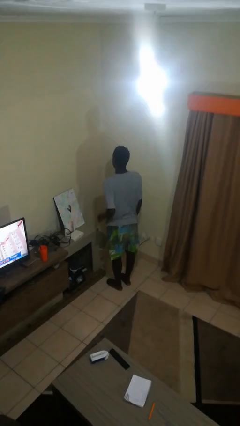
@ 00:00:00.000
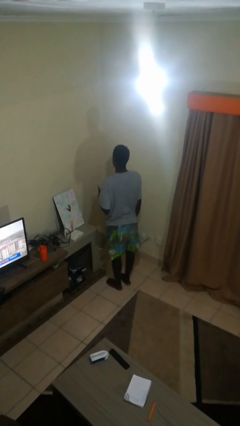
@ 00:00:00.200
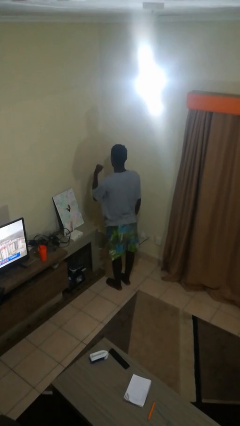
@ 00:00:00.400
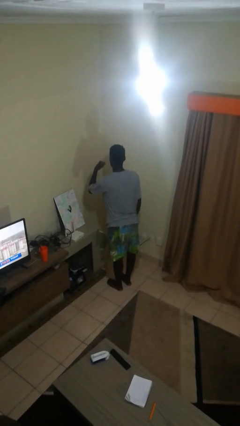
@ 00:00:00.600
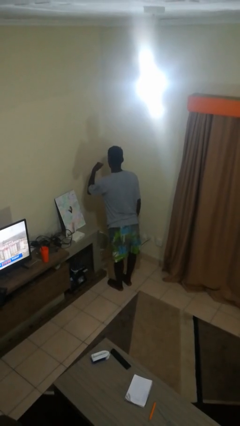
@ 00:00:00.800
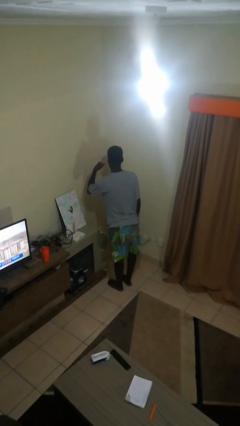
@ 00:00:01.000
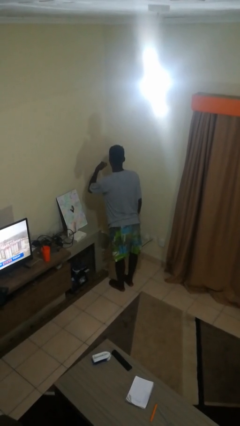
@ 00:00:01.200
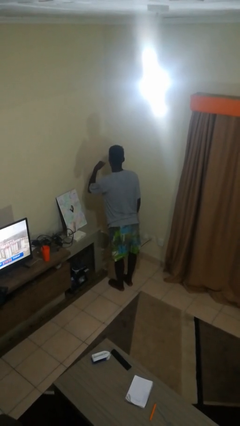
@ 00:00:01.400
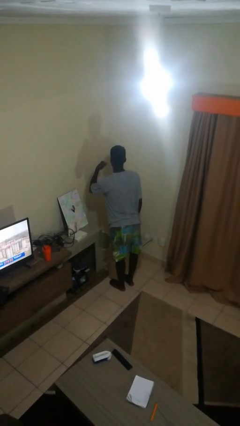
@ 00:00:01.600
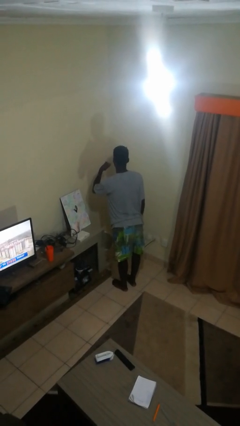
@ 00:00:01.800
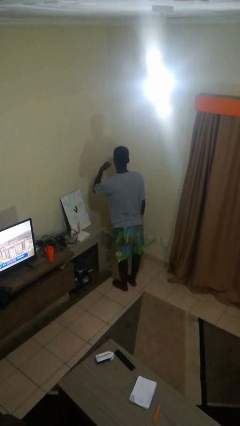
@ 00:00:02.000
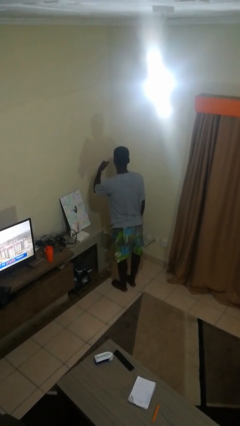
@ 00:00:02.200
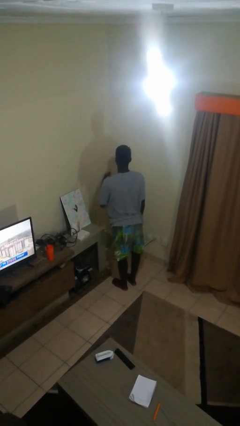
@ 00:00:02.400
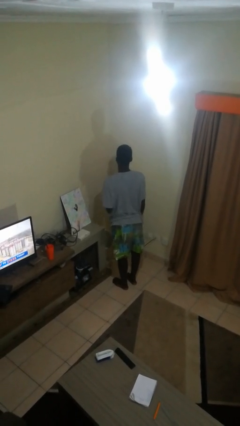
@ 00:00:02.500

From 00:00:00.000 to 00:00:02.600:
person gestures call me

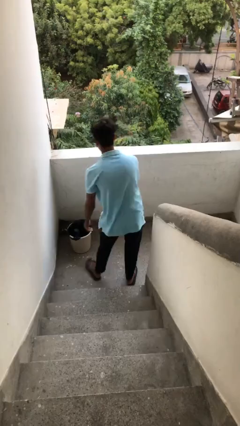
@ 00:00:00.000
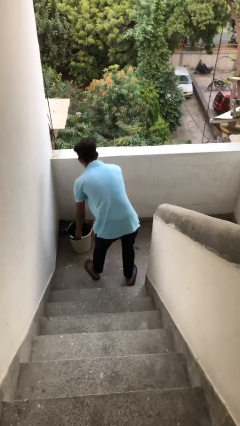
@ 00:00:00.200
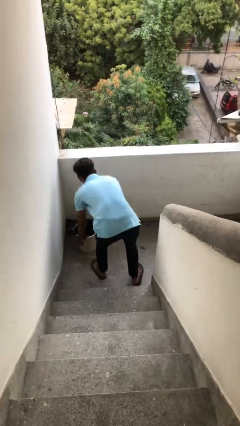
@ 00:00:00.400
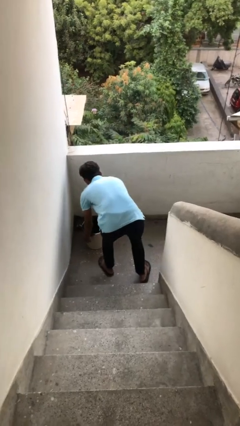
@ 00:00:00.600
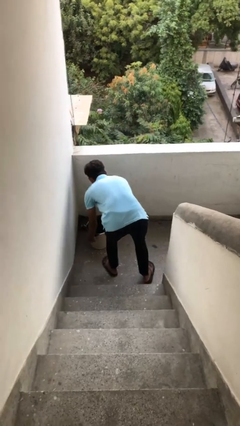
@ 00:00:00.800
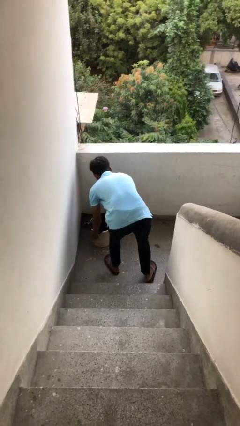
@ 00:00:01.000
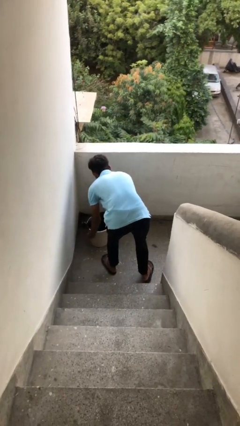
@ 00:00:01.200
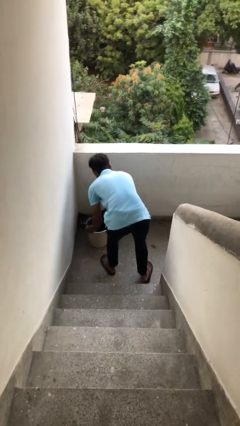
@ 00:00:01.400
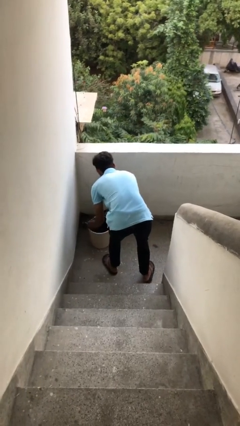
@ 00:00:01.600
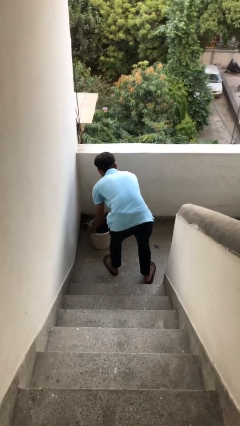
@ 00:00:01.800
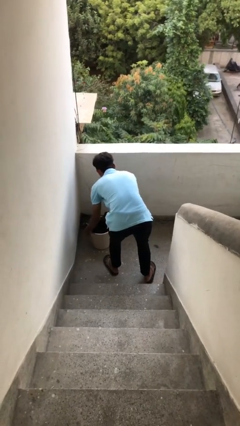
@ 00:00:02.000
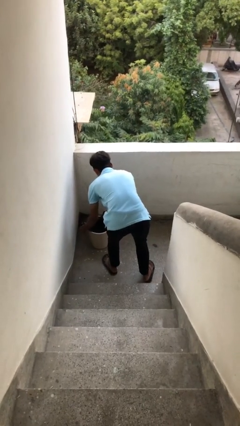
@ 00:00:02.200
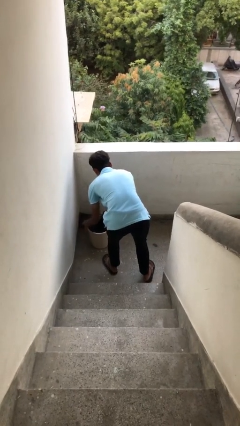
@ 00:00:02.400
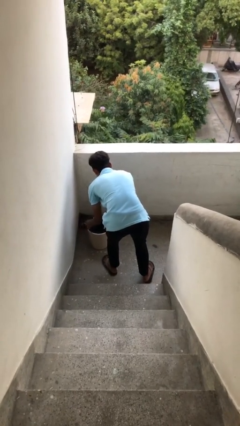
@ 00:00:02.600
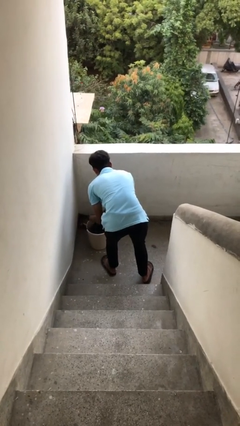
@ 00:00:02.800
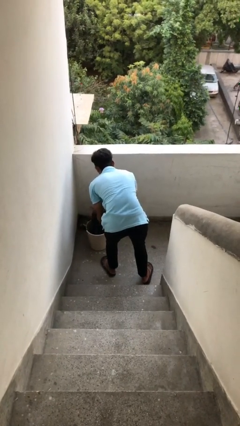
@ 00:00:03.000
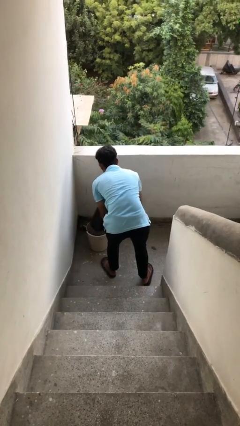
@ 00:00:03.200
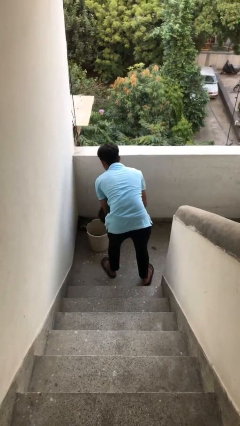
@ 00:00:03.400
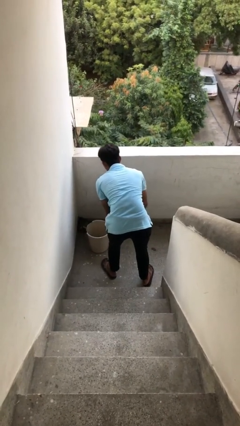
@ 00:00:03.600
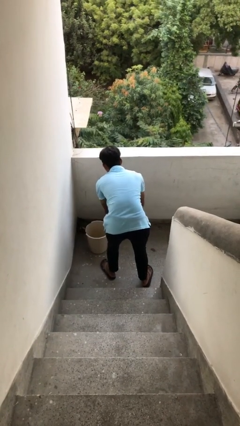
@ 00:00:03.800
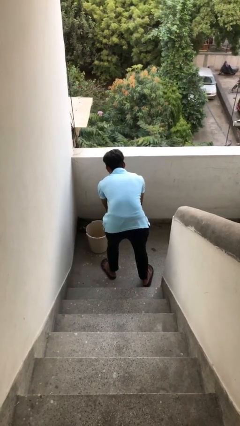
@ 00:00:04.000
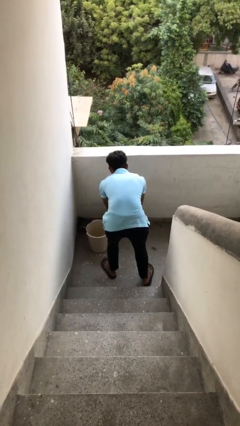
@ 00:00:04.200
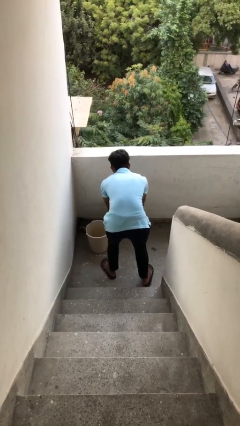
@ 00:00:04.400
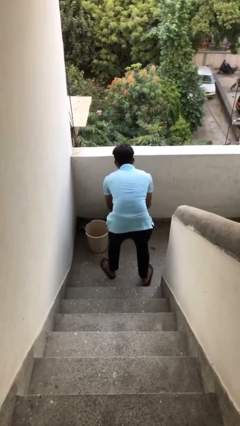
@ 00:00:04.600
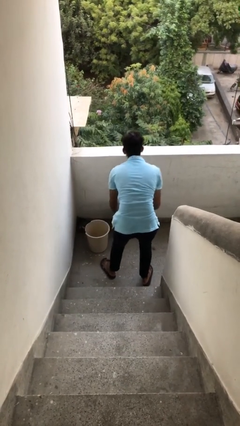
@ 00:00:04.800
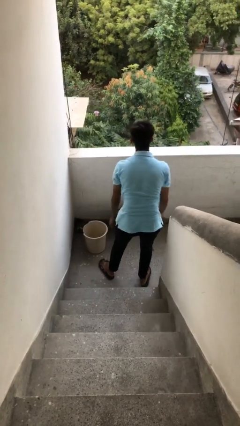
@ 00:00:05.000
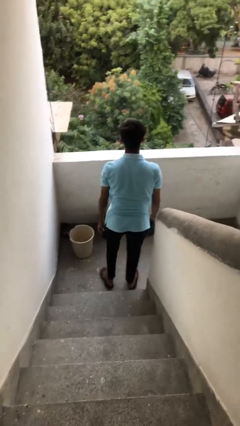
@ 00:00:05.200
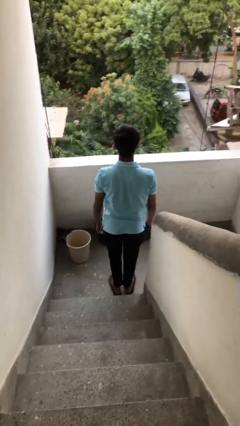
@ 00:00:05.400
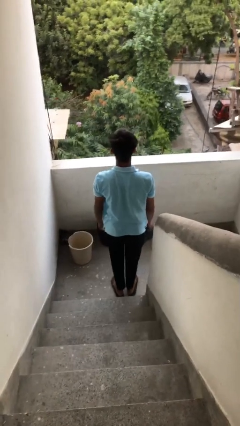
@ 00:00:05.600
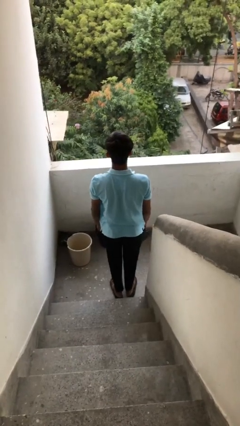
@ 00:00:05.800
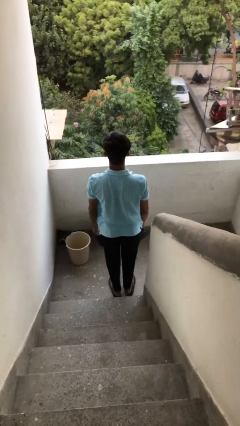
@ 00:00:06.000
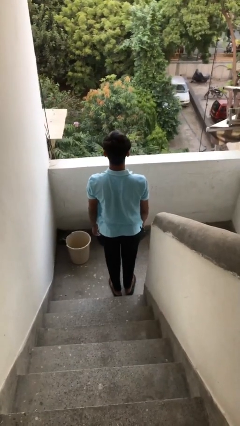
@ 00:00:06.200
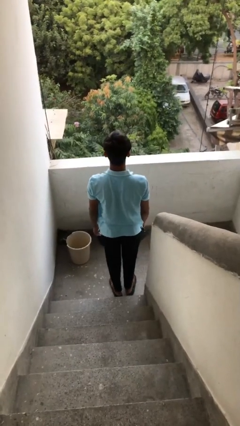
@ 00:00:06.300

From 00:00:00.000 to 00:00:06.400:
person removes trashbag from trashcan

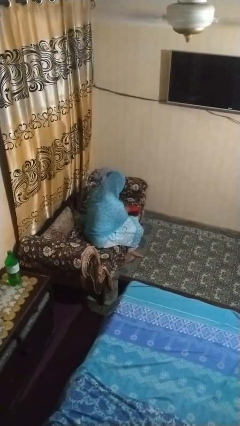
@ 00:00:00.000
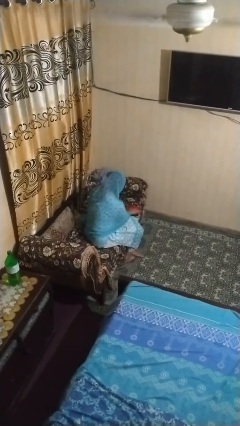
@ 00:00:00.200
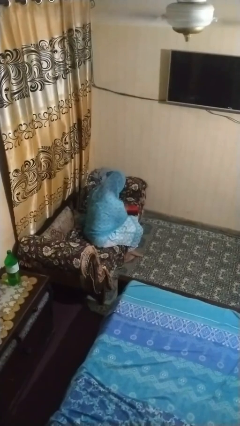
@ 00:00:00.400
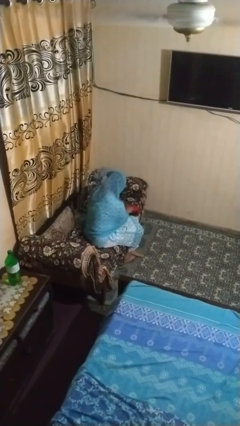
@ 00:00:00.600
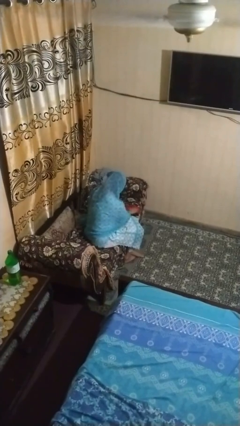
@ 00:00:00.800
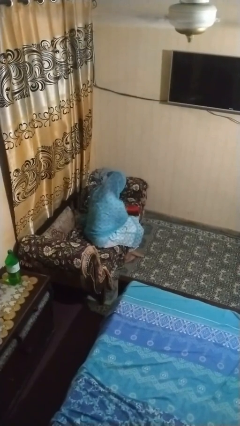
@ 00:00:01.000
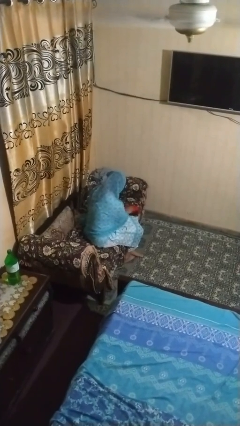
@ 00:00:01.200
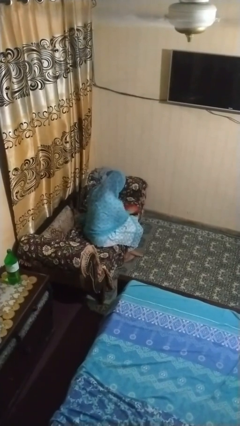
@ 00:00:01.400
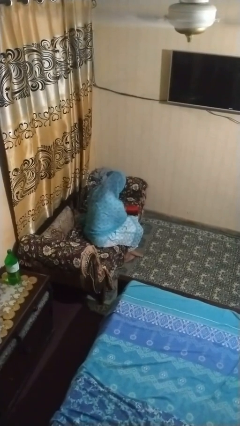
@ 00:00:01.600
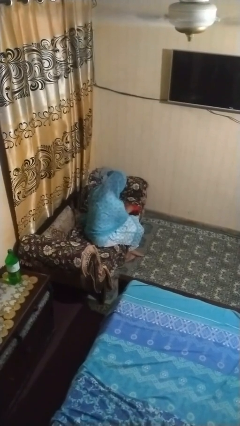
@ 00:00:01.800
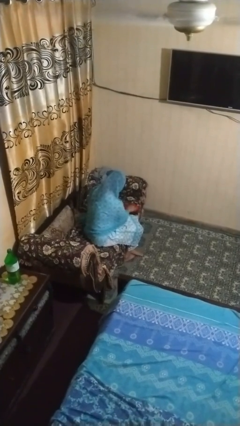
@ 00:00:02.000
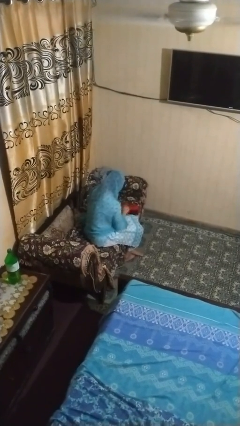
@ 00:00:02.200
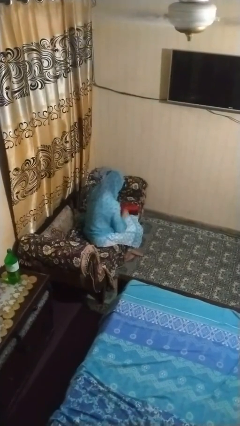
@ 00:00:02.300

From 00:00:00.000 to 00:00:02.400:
person waves hand over object

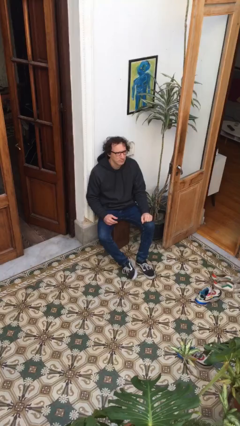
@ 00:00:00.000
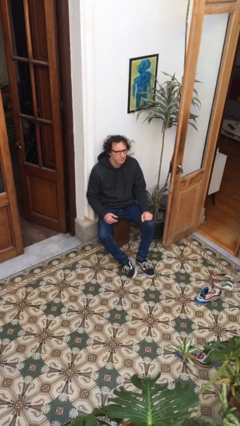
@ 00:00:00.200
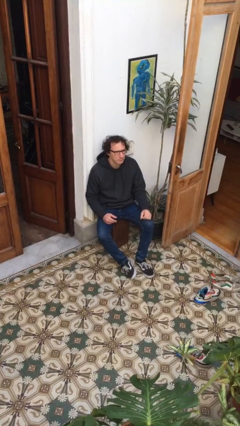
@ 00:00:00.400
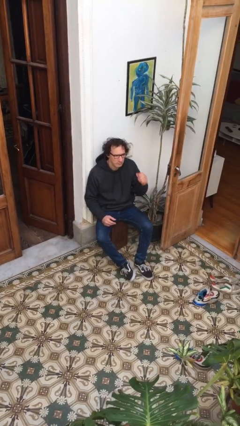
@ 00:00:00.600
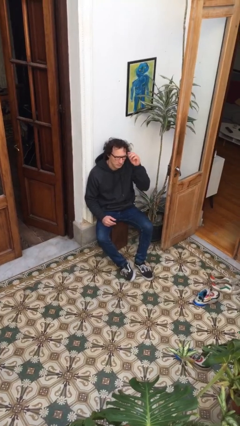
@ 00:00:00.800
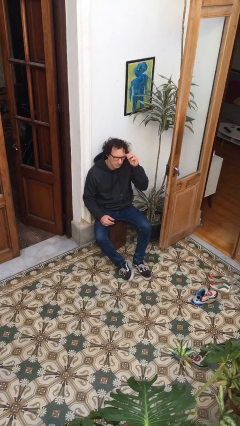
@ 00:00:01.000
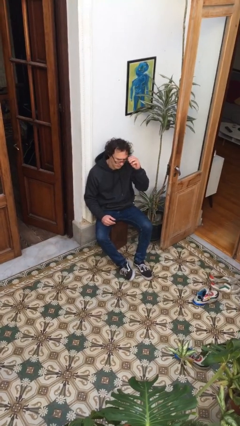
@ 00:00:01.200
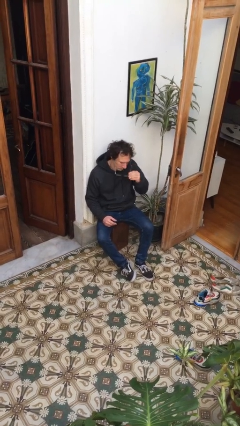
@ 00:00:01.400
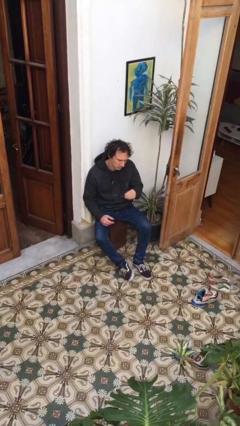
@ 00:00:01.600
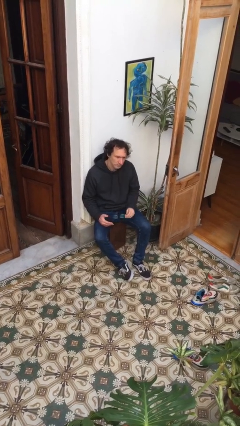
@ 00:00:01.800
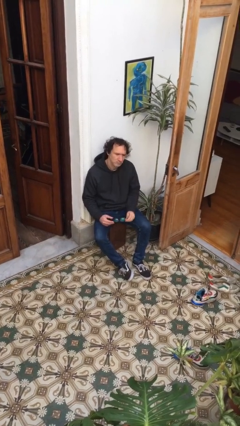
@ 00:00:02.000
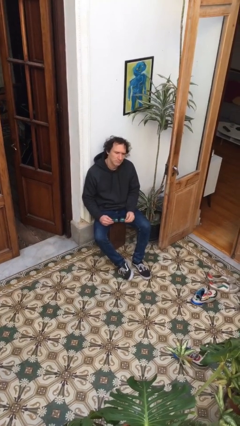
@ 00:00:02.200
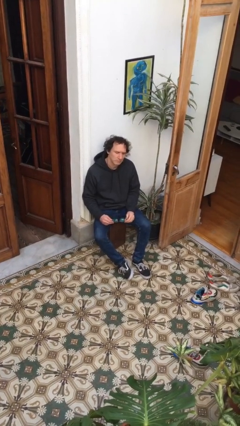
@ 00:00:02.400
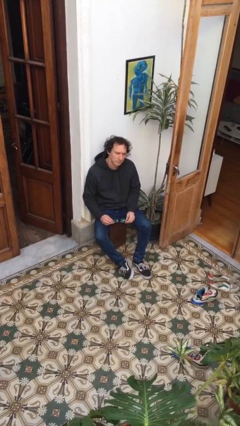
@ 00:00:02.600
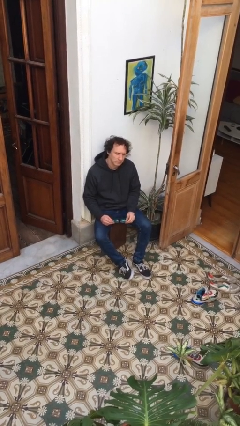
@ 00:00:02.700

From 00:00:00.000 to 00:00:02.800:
person takes off glasses

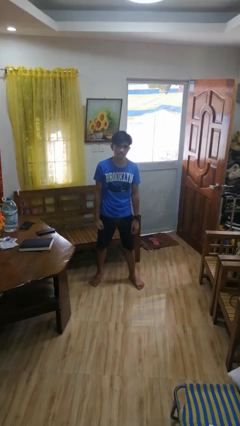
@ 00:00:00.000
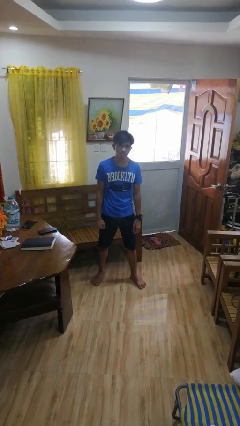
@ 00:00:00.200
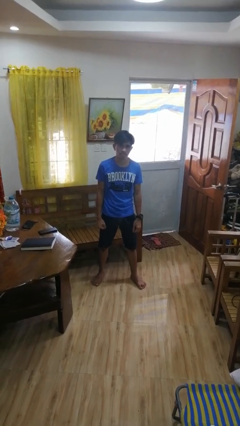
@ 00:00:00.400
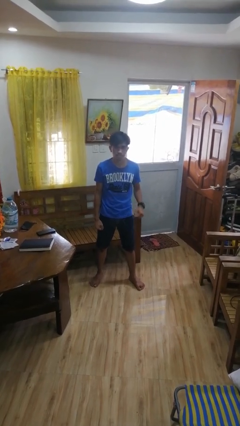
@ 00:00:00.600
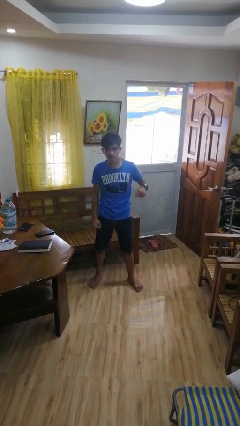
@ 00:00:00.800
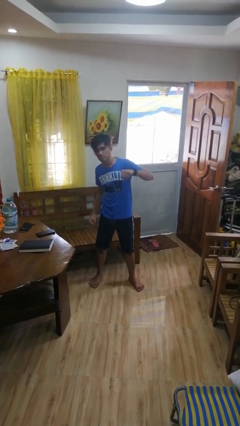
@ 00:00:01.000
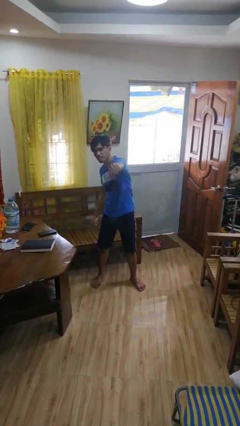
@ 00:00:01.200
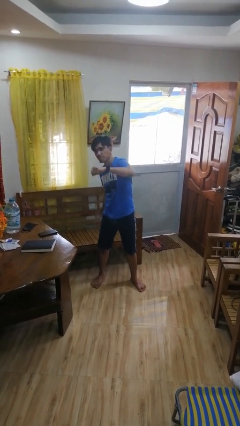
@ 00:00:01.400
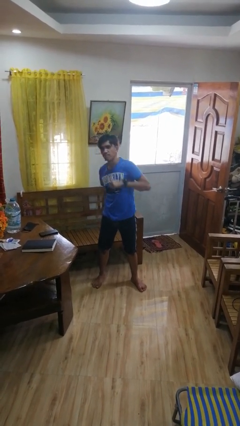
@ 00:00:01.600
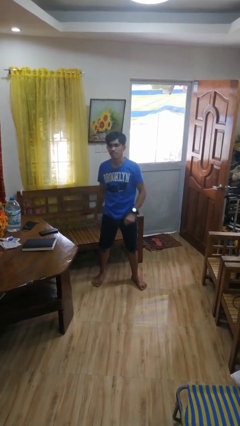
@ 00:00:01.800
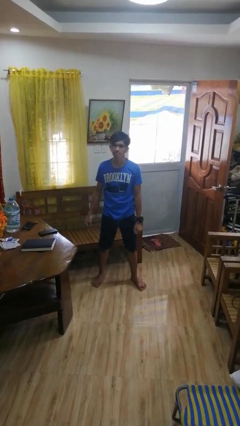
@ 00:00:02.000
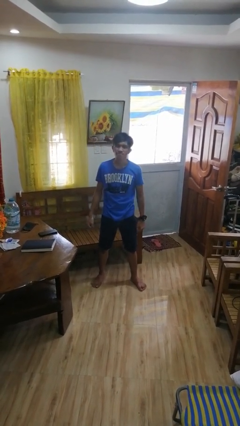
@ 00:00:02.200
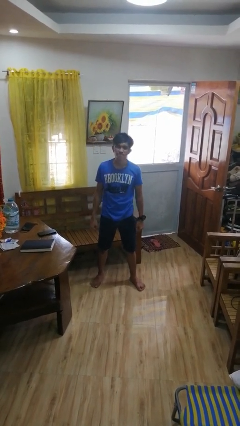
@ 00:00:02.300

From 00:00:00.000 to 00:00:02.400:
person punches

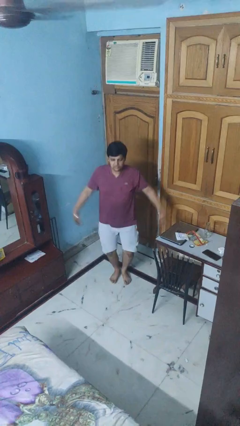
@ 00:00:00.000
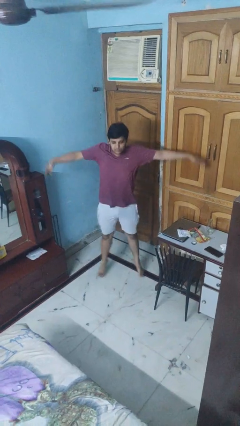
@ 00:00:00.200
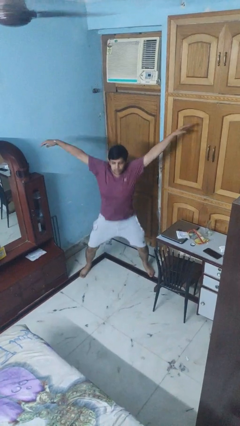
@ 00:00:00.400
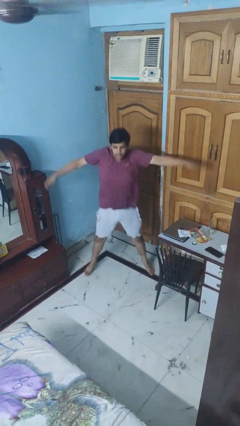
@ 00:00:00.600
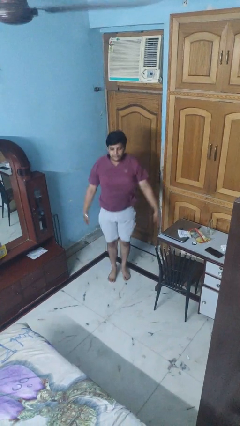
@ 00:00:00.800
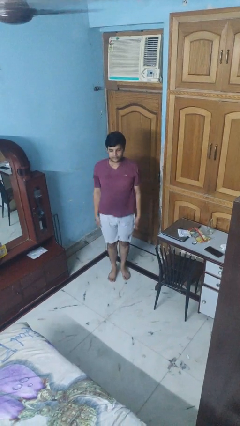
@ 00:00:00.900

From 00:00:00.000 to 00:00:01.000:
person exercises with jumping jacks
